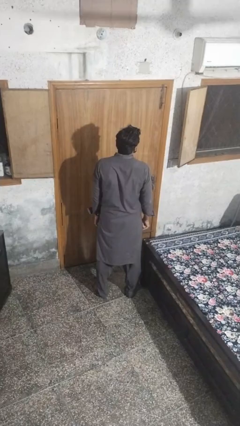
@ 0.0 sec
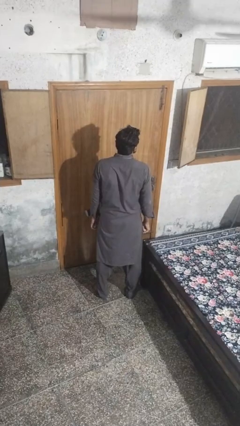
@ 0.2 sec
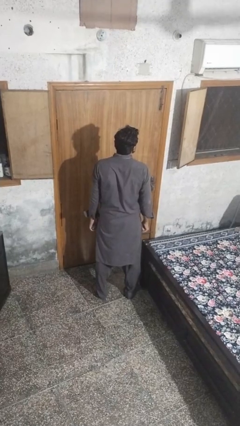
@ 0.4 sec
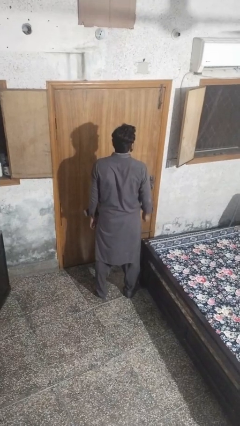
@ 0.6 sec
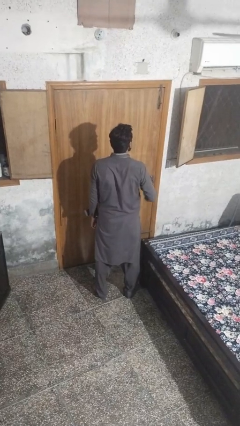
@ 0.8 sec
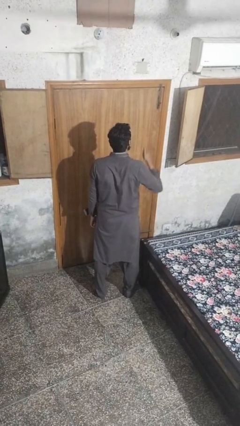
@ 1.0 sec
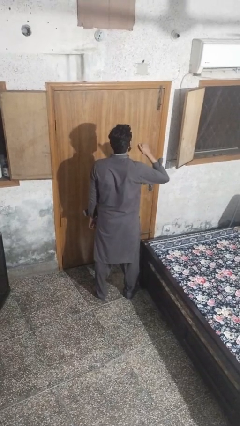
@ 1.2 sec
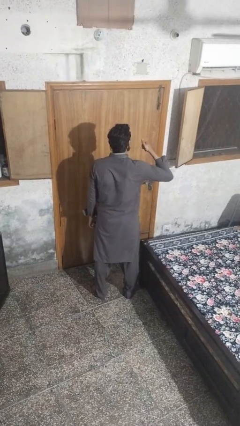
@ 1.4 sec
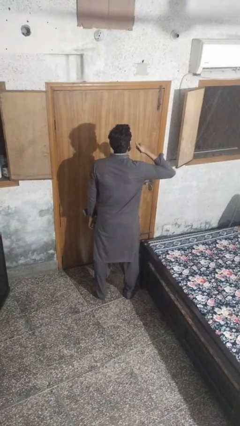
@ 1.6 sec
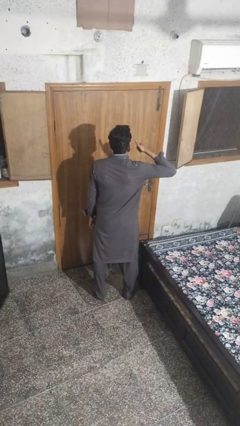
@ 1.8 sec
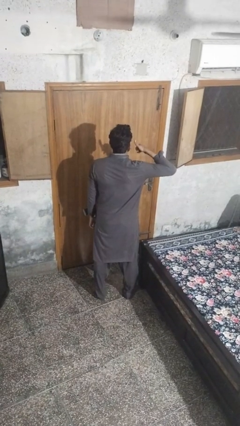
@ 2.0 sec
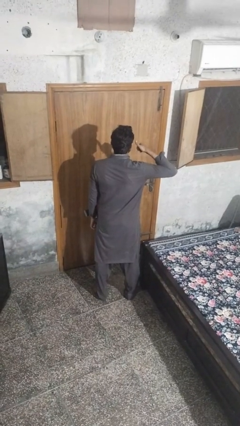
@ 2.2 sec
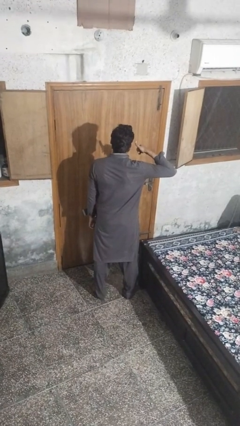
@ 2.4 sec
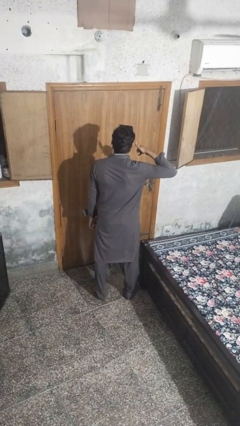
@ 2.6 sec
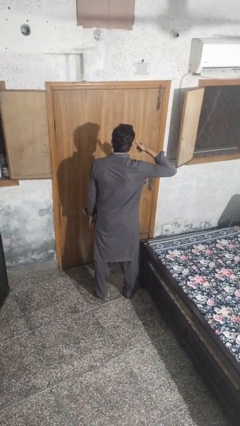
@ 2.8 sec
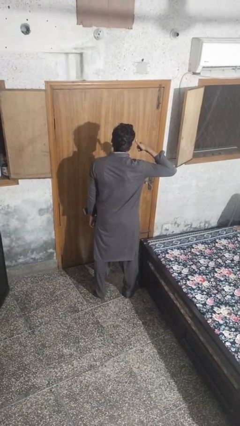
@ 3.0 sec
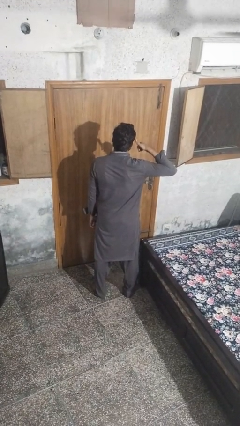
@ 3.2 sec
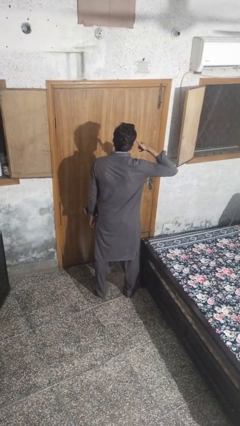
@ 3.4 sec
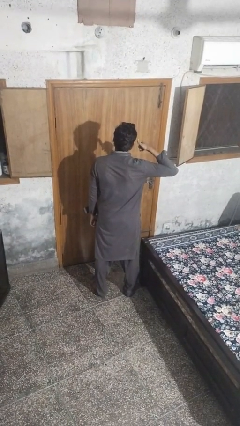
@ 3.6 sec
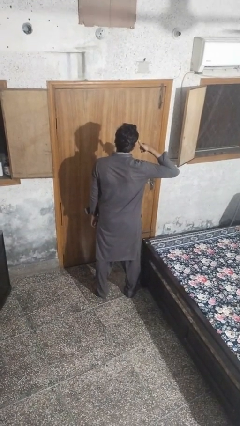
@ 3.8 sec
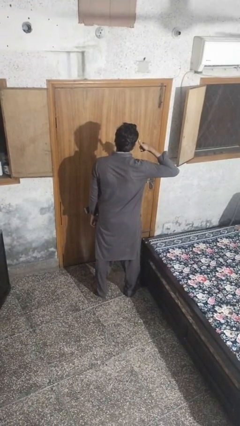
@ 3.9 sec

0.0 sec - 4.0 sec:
person gestures call me

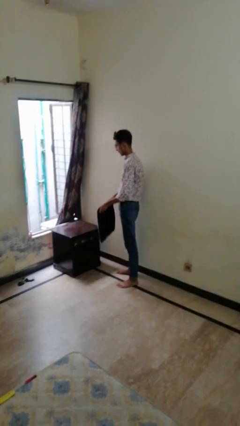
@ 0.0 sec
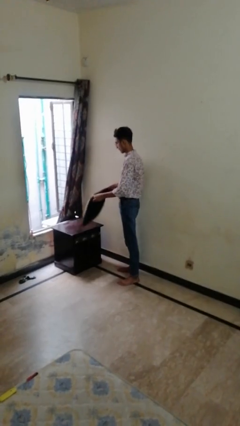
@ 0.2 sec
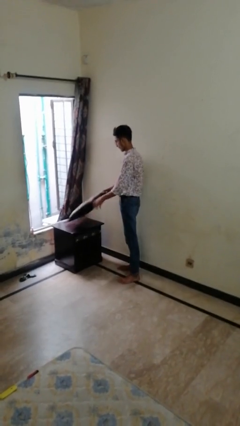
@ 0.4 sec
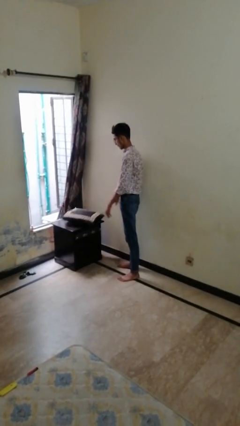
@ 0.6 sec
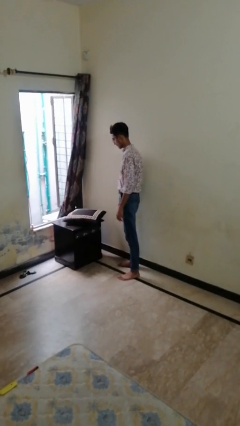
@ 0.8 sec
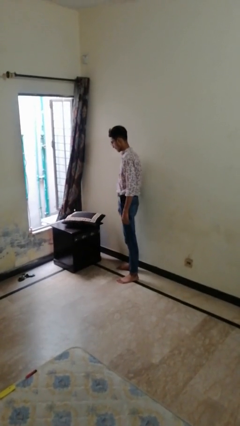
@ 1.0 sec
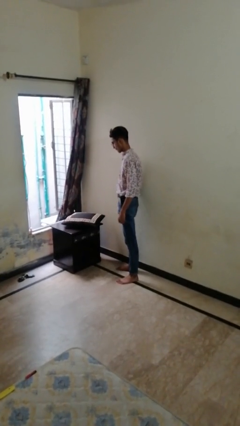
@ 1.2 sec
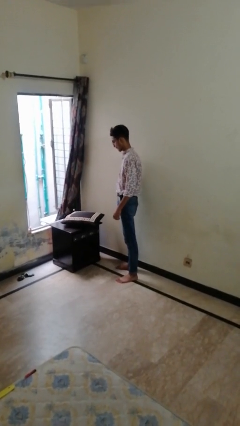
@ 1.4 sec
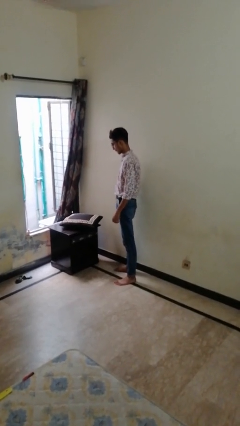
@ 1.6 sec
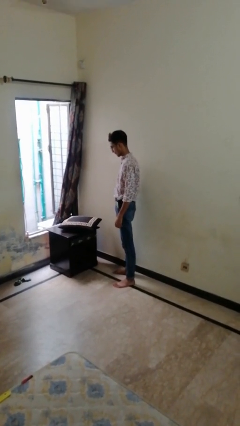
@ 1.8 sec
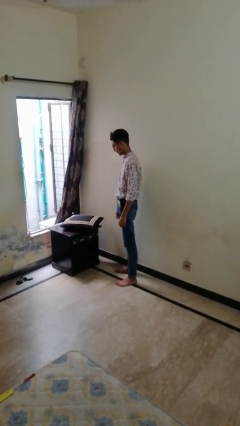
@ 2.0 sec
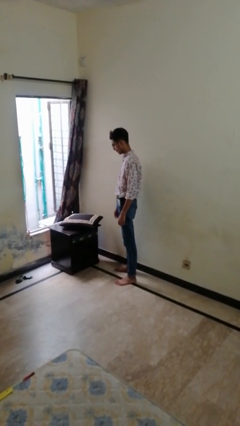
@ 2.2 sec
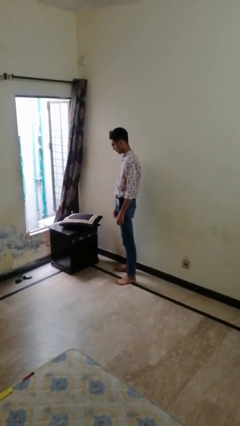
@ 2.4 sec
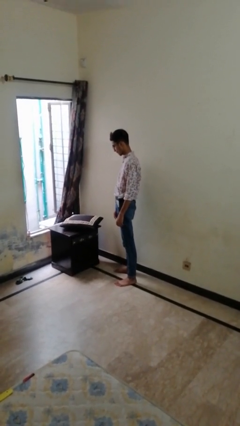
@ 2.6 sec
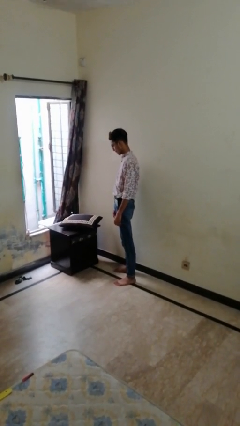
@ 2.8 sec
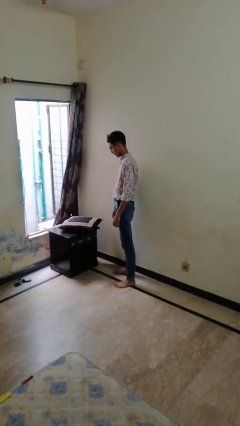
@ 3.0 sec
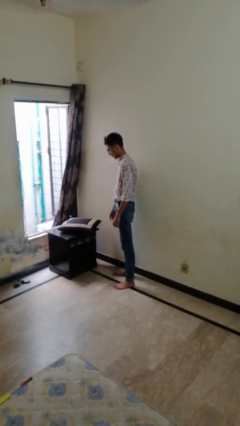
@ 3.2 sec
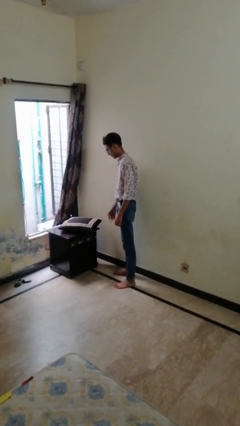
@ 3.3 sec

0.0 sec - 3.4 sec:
person throws object on table

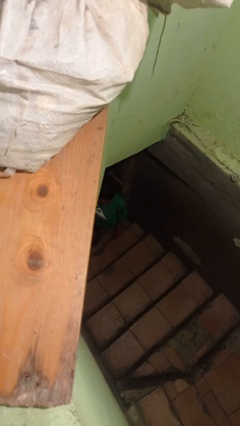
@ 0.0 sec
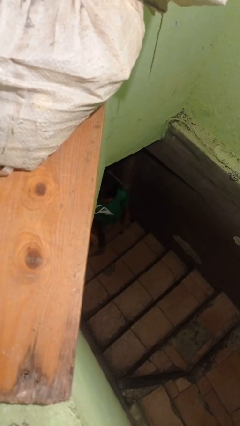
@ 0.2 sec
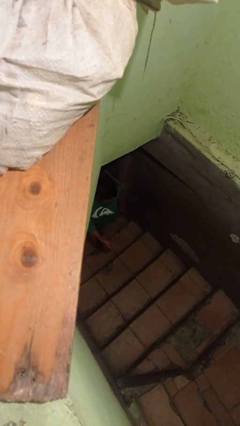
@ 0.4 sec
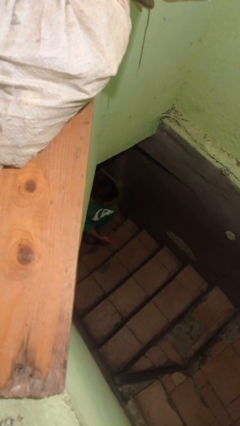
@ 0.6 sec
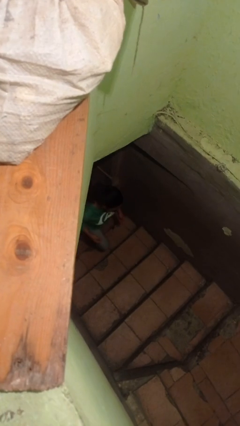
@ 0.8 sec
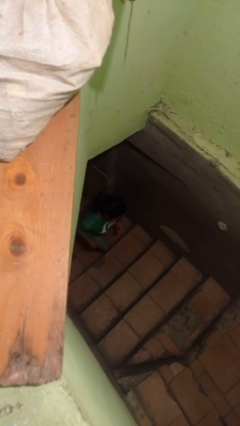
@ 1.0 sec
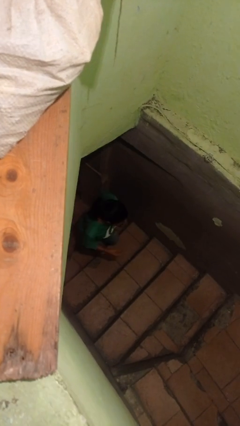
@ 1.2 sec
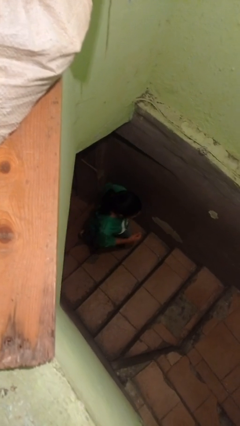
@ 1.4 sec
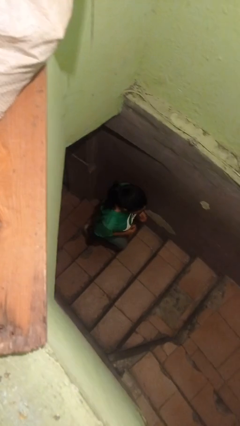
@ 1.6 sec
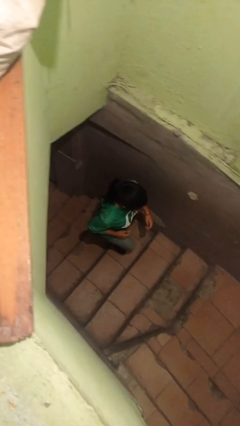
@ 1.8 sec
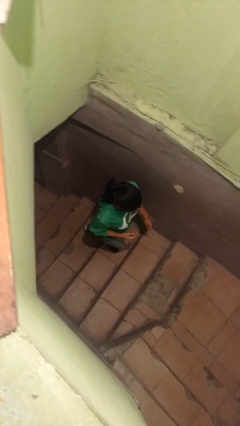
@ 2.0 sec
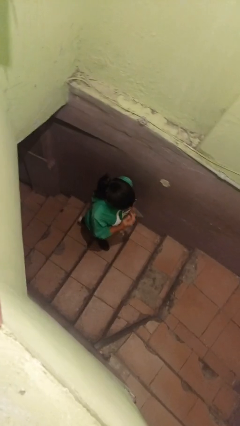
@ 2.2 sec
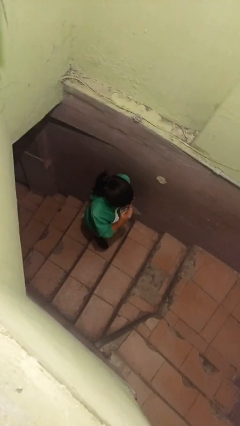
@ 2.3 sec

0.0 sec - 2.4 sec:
person climbs up stairs

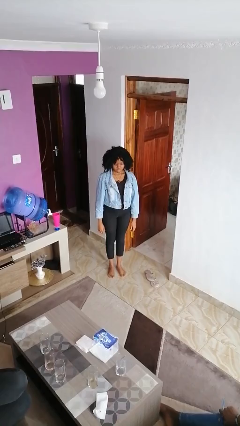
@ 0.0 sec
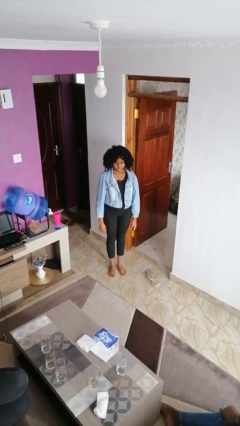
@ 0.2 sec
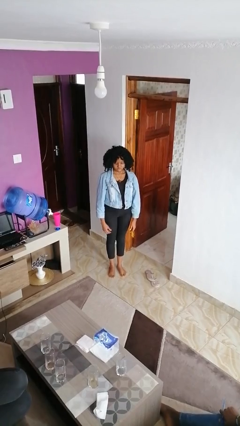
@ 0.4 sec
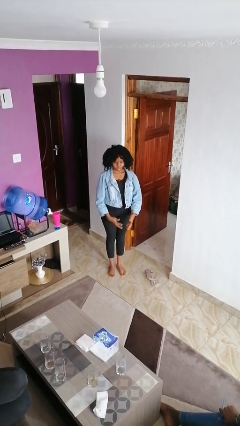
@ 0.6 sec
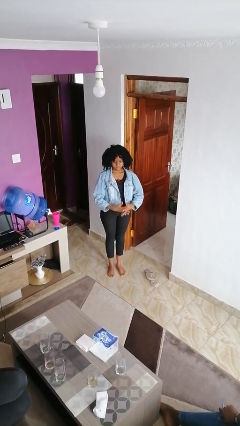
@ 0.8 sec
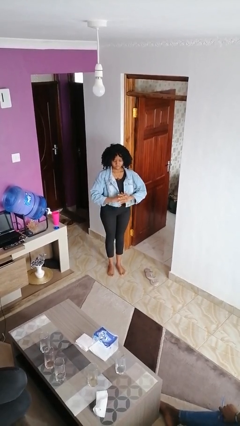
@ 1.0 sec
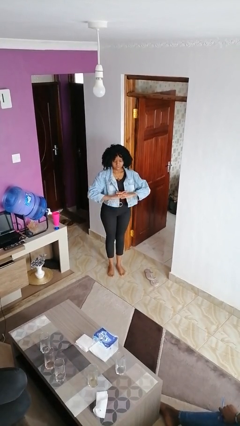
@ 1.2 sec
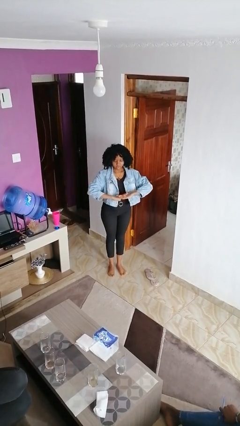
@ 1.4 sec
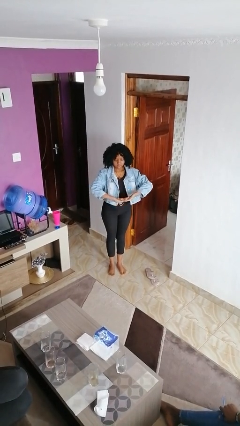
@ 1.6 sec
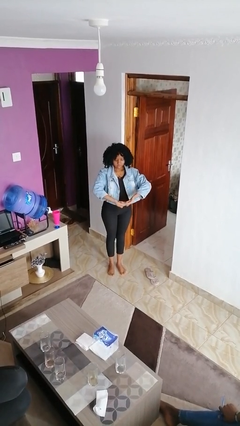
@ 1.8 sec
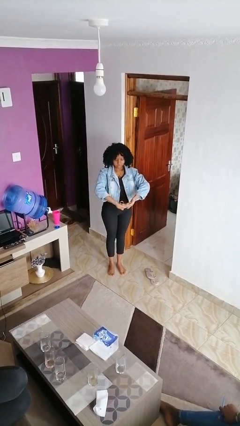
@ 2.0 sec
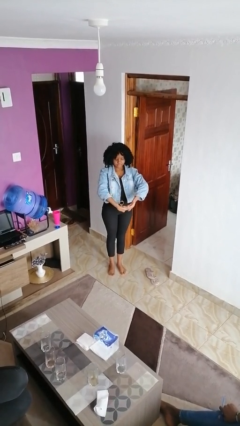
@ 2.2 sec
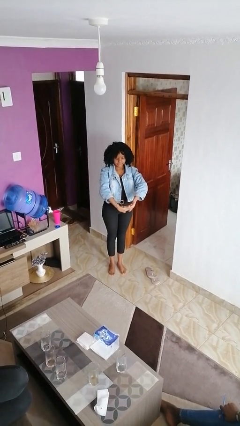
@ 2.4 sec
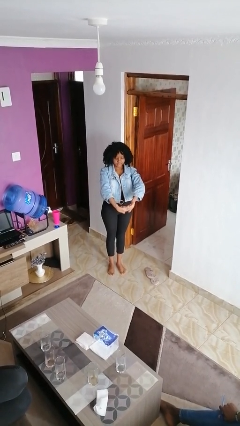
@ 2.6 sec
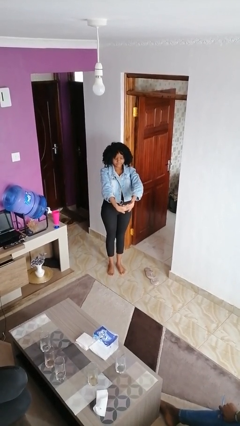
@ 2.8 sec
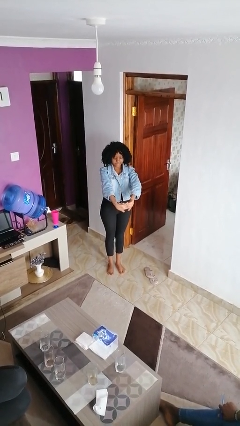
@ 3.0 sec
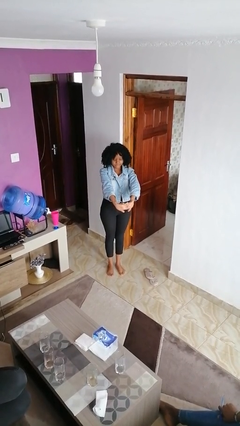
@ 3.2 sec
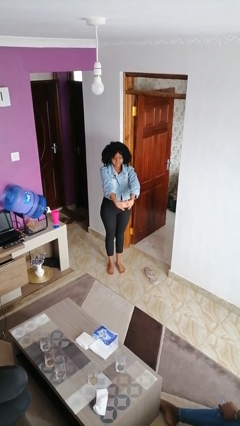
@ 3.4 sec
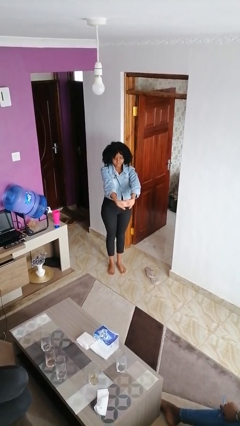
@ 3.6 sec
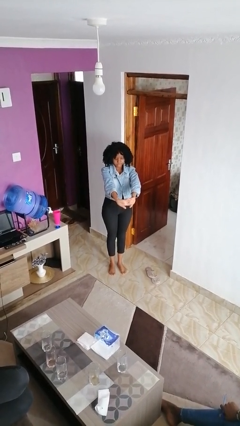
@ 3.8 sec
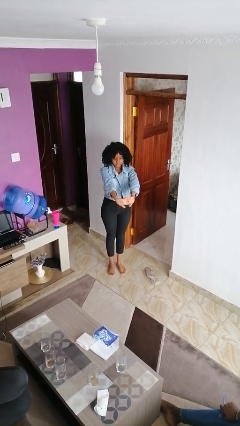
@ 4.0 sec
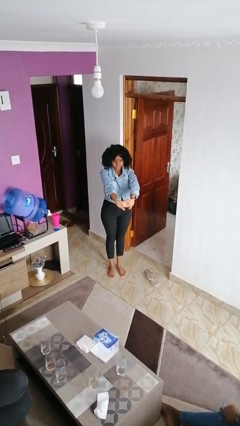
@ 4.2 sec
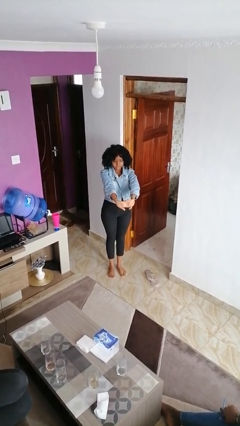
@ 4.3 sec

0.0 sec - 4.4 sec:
person cracks knuckles

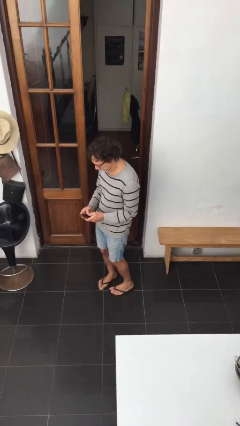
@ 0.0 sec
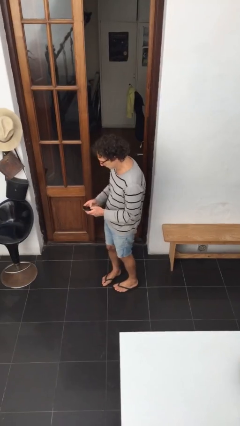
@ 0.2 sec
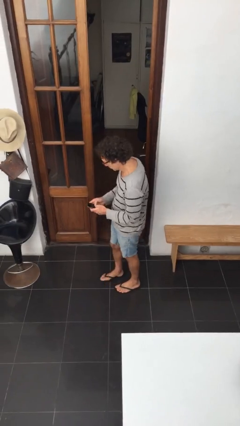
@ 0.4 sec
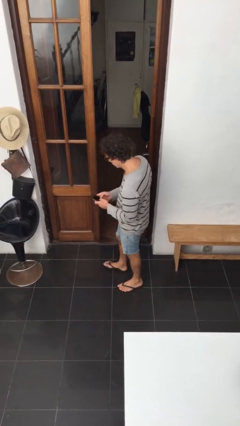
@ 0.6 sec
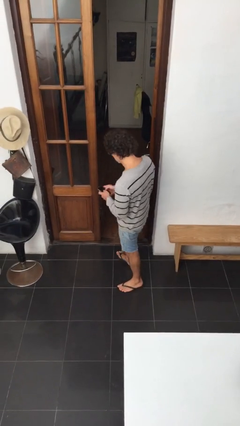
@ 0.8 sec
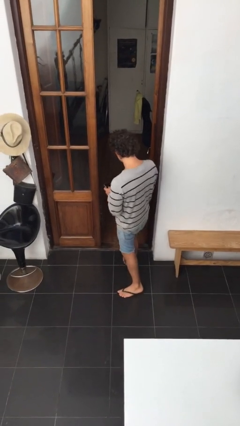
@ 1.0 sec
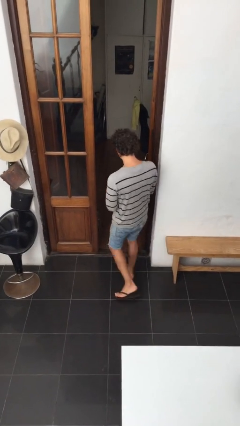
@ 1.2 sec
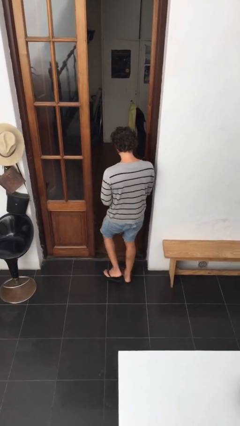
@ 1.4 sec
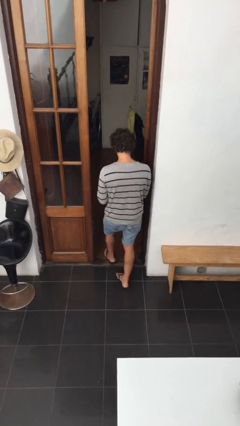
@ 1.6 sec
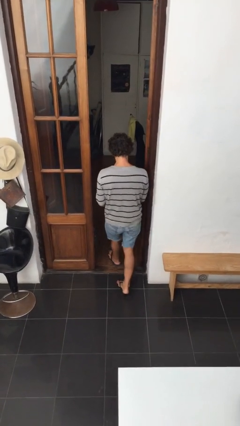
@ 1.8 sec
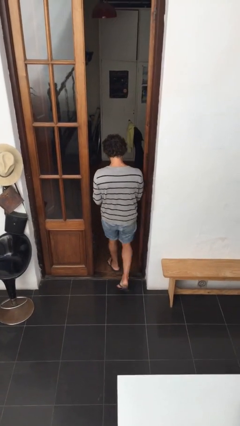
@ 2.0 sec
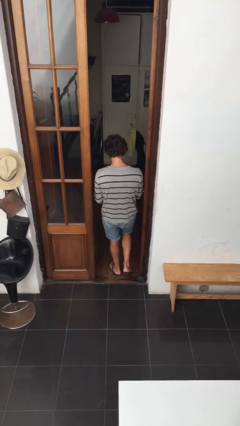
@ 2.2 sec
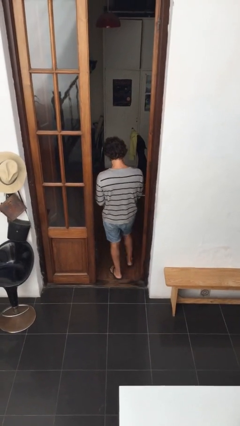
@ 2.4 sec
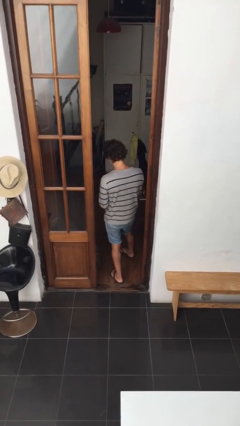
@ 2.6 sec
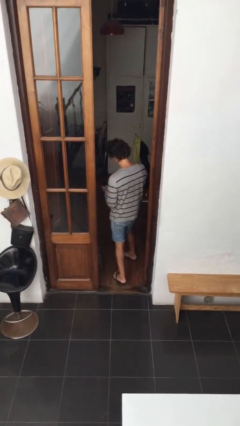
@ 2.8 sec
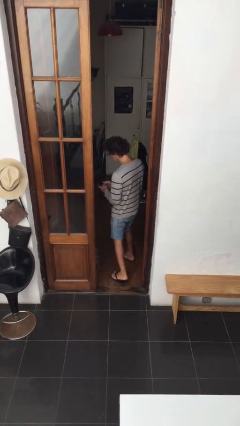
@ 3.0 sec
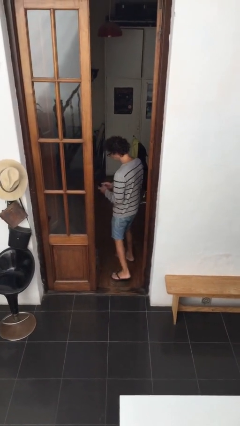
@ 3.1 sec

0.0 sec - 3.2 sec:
person exits scene through structure
